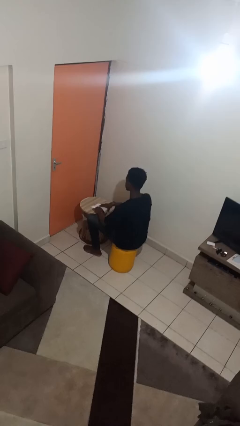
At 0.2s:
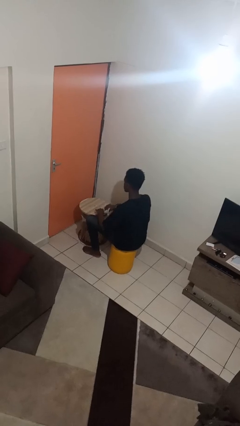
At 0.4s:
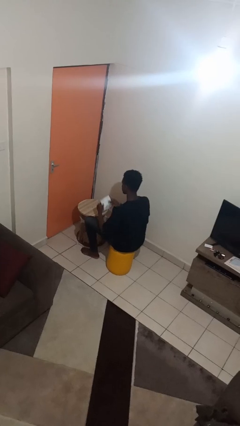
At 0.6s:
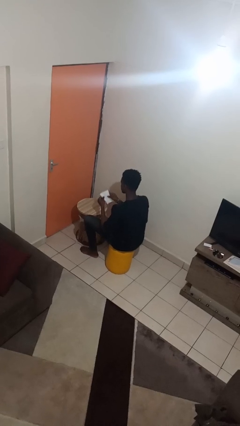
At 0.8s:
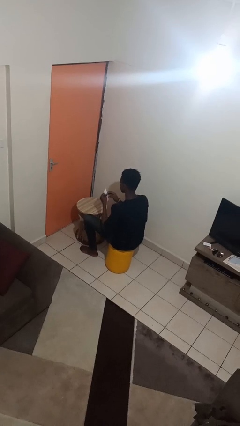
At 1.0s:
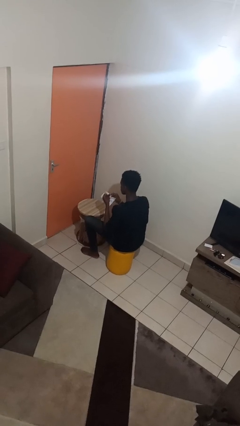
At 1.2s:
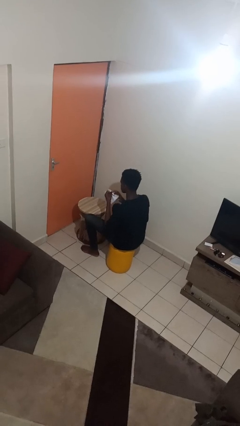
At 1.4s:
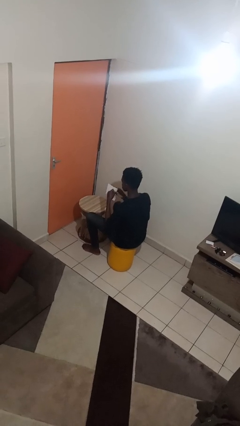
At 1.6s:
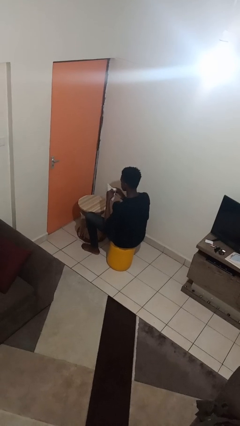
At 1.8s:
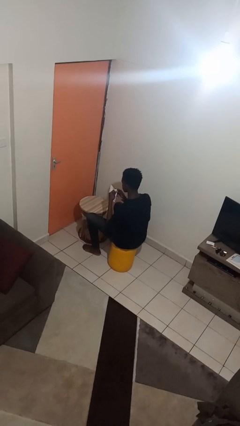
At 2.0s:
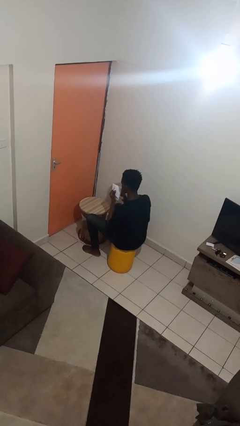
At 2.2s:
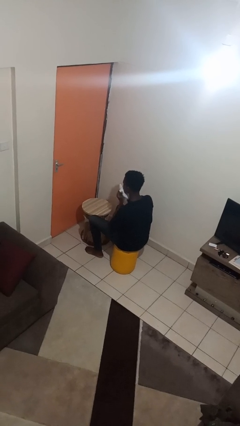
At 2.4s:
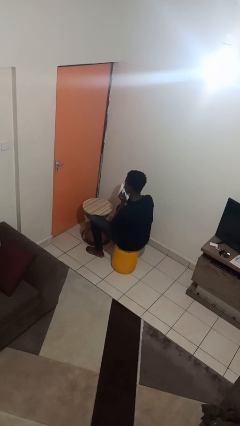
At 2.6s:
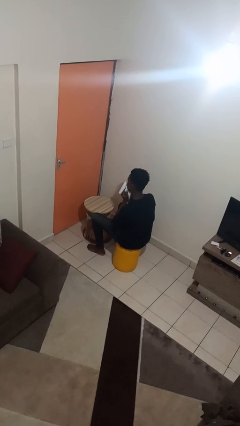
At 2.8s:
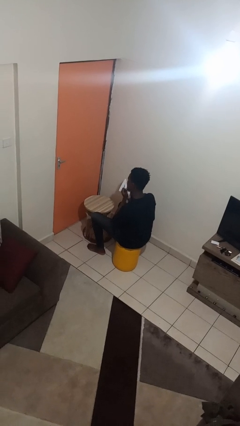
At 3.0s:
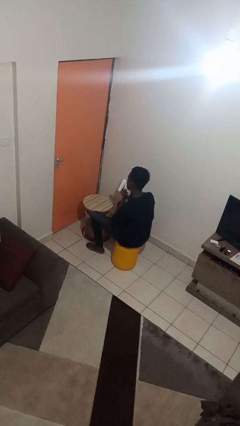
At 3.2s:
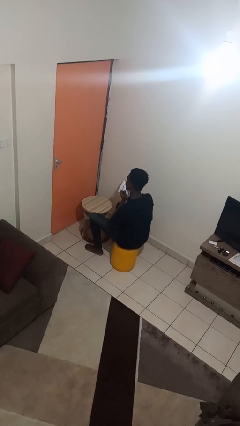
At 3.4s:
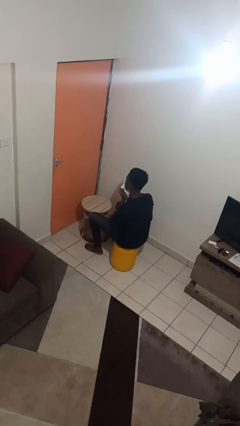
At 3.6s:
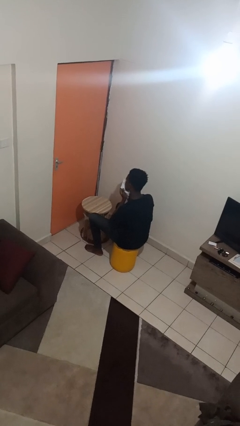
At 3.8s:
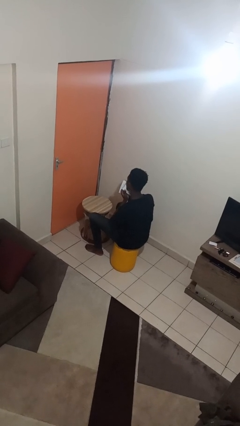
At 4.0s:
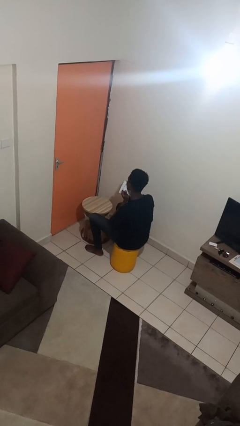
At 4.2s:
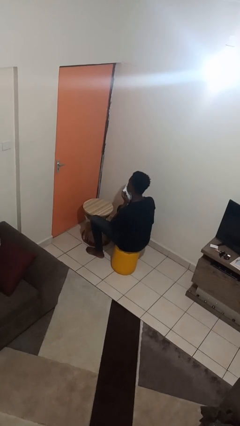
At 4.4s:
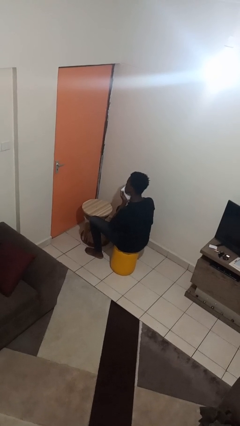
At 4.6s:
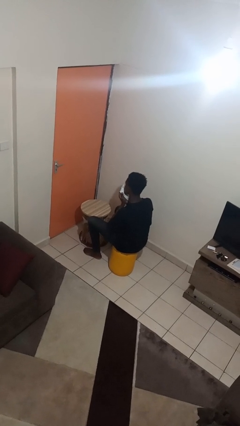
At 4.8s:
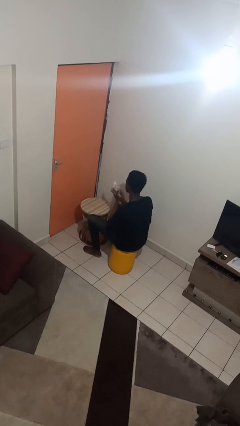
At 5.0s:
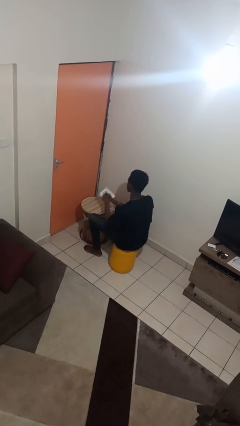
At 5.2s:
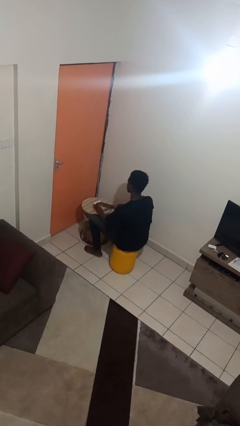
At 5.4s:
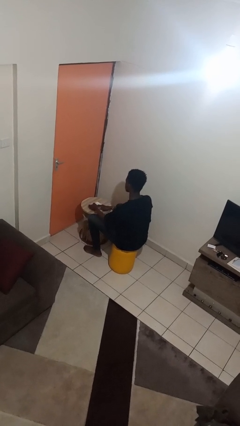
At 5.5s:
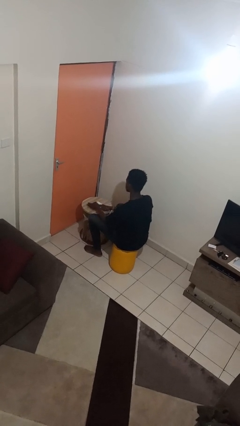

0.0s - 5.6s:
person wipes mouth with napkin

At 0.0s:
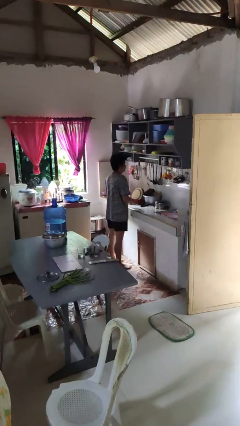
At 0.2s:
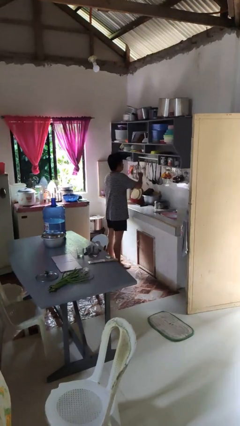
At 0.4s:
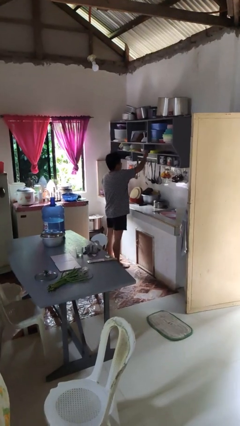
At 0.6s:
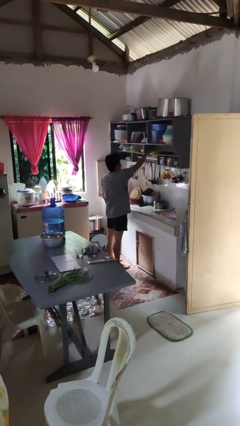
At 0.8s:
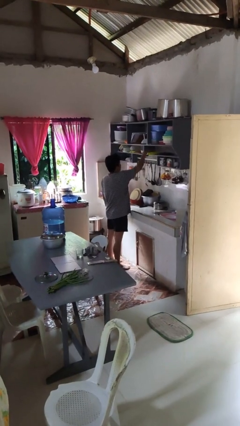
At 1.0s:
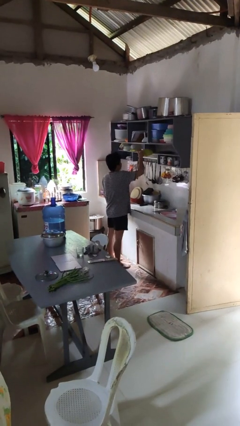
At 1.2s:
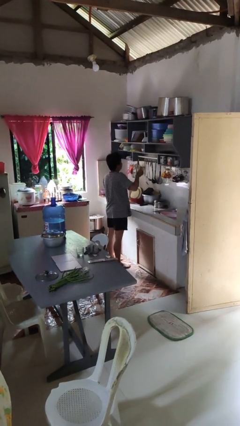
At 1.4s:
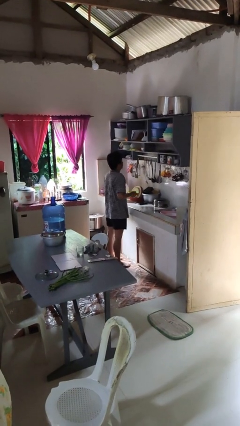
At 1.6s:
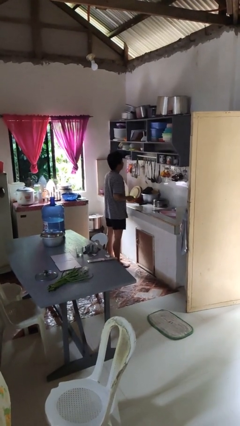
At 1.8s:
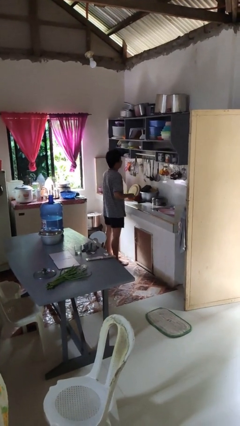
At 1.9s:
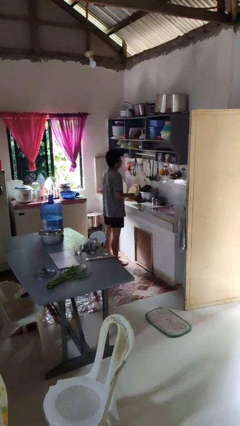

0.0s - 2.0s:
person takes object from cabinet

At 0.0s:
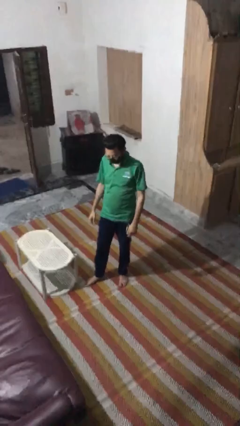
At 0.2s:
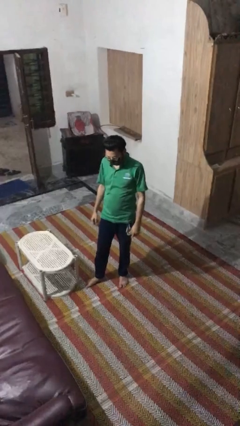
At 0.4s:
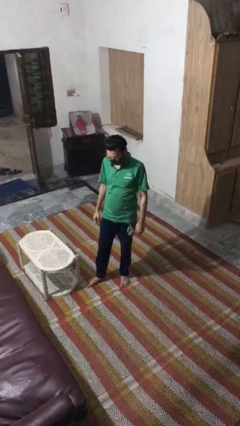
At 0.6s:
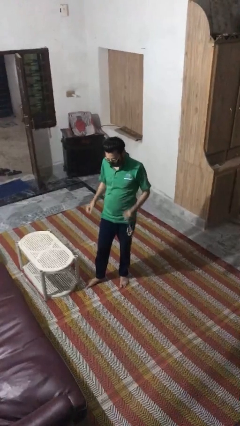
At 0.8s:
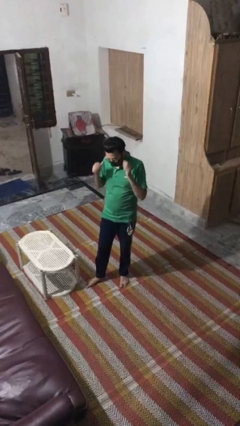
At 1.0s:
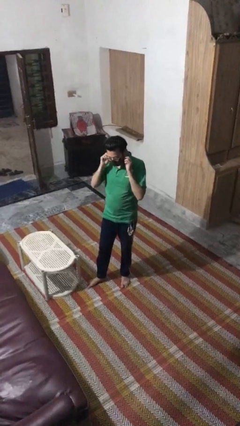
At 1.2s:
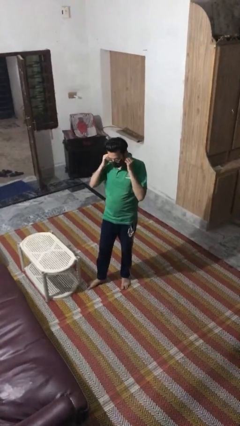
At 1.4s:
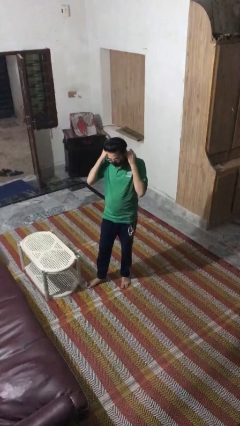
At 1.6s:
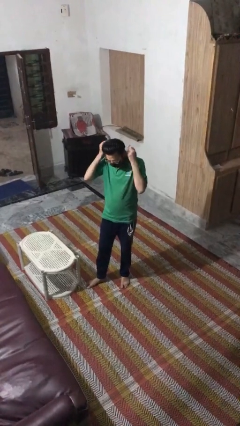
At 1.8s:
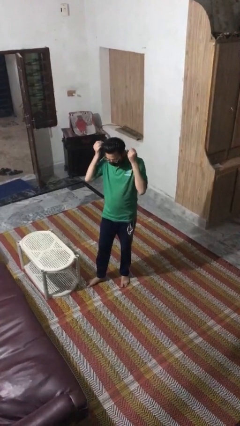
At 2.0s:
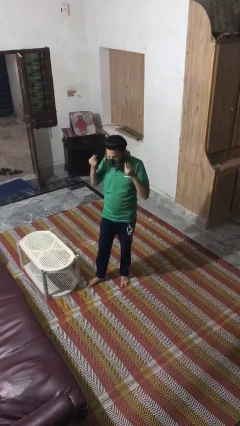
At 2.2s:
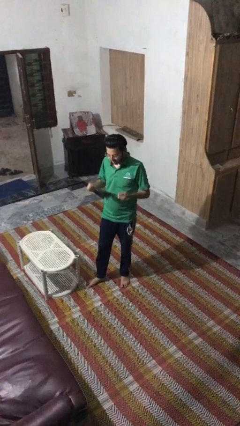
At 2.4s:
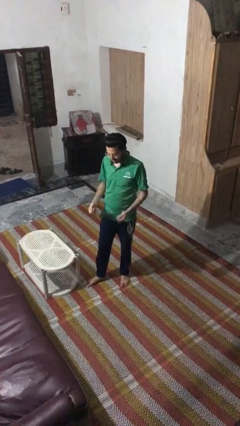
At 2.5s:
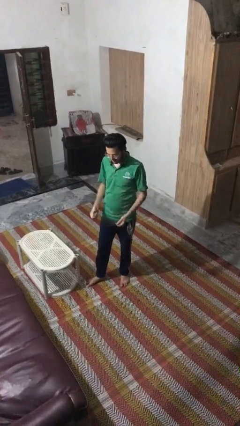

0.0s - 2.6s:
person takes off facemask

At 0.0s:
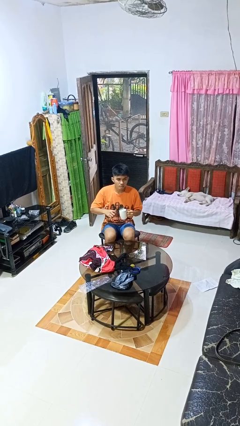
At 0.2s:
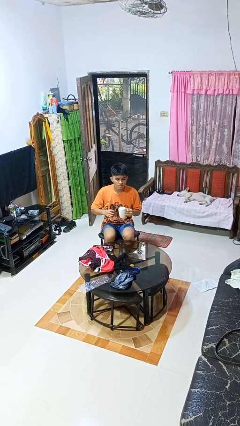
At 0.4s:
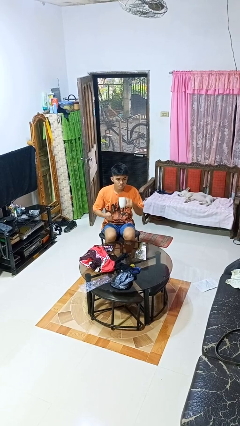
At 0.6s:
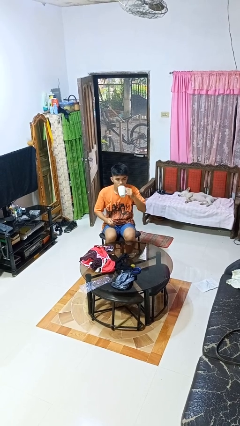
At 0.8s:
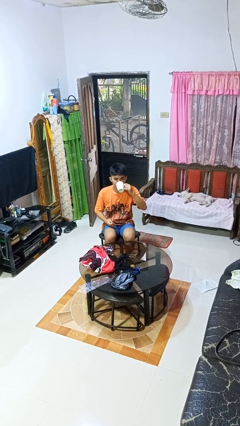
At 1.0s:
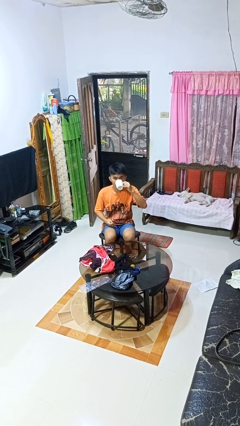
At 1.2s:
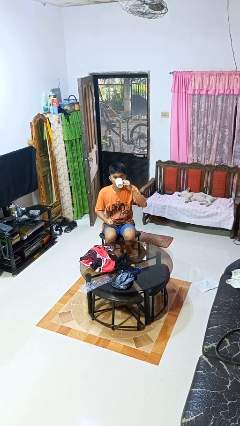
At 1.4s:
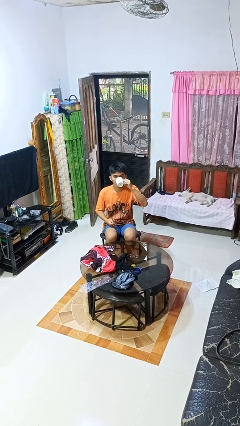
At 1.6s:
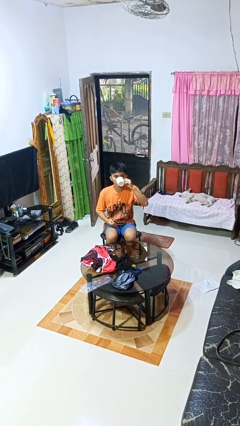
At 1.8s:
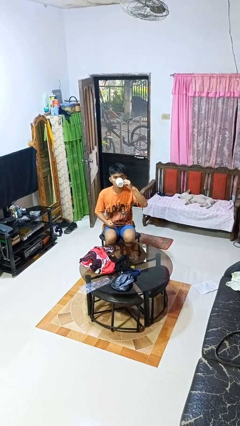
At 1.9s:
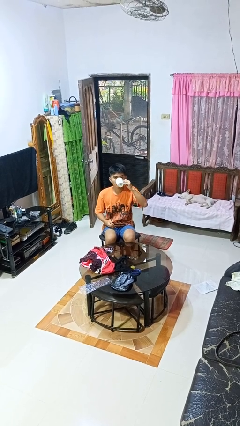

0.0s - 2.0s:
person drinks from mug

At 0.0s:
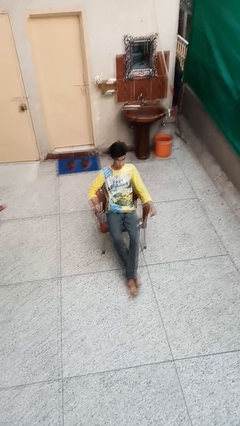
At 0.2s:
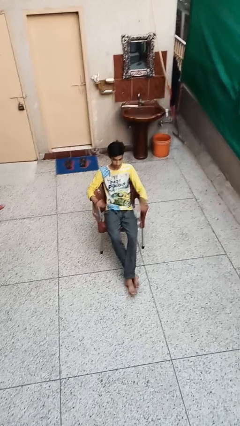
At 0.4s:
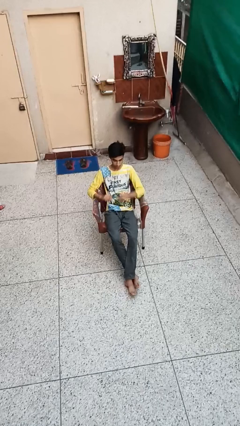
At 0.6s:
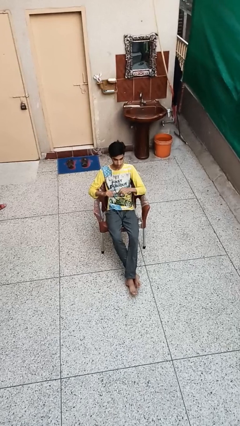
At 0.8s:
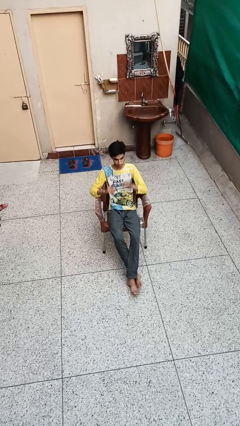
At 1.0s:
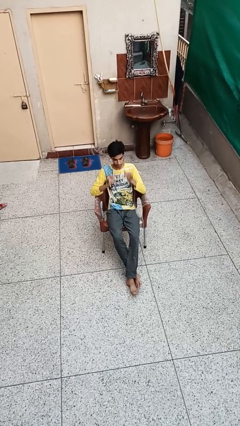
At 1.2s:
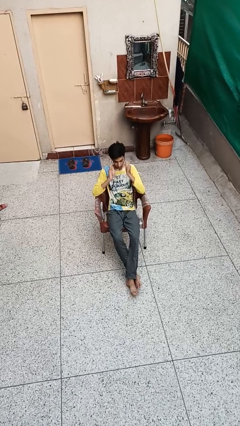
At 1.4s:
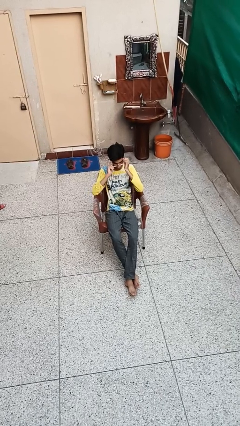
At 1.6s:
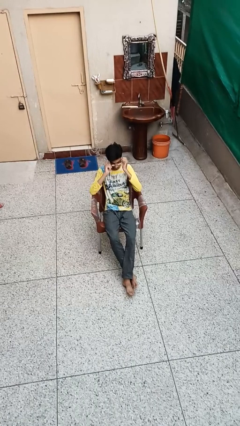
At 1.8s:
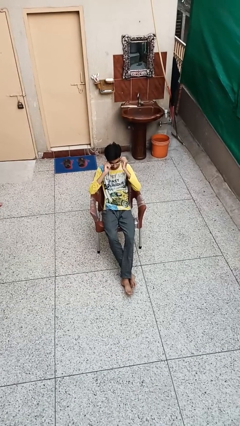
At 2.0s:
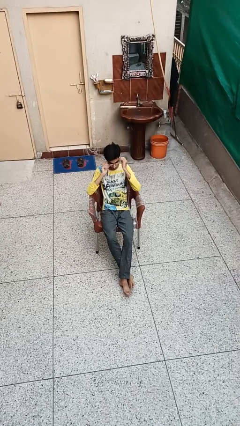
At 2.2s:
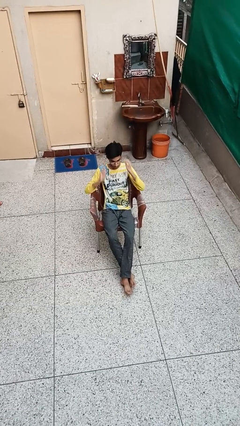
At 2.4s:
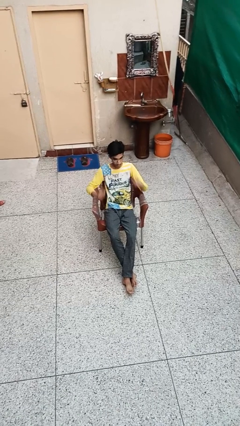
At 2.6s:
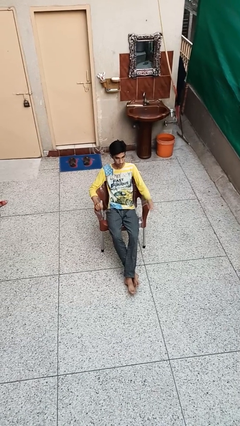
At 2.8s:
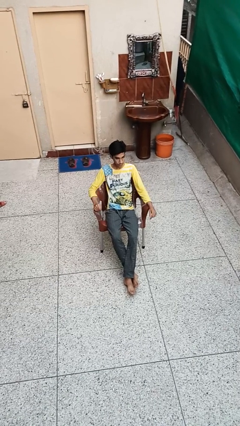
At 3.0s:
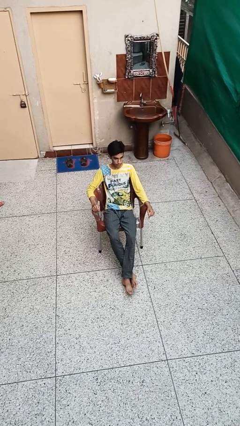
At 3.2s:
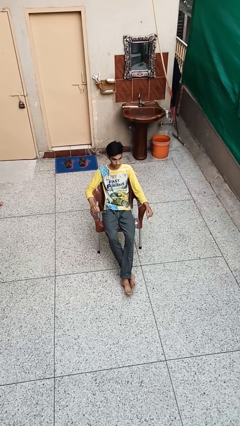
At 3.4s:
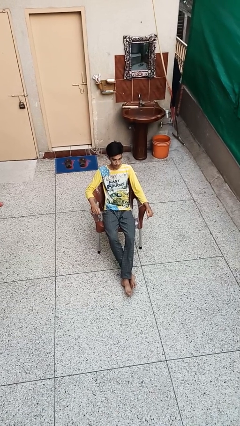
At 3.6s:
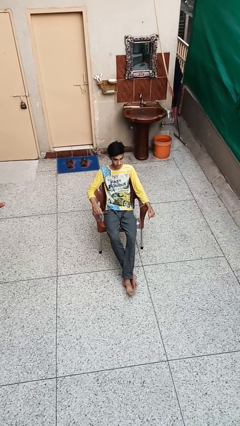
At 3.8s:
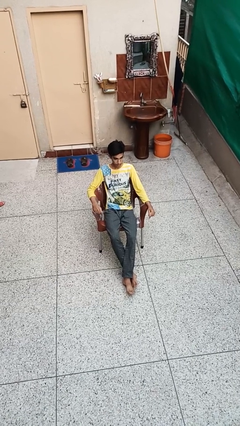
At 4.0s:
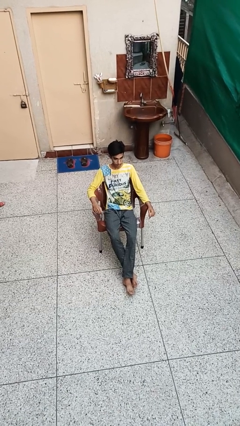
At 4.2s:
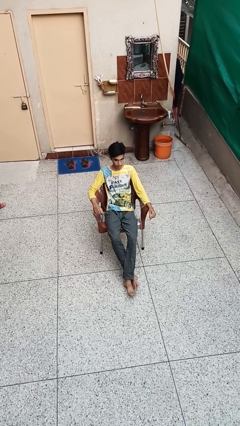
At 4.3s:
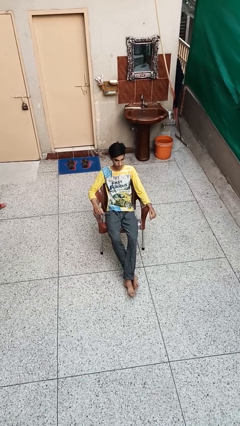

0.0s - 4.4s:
person puts on glasses

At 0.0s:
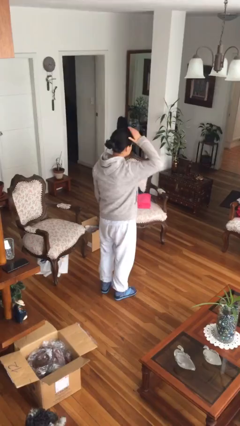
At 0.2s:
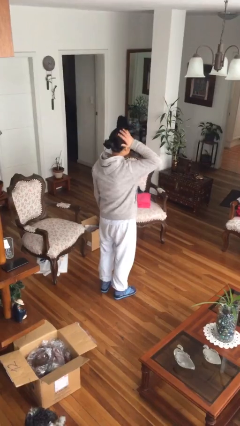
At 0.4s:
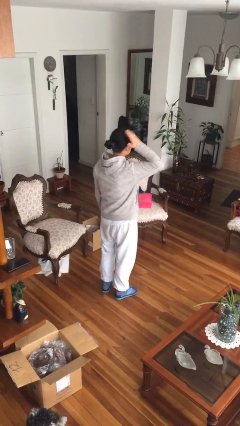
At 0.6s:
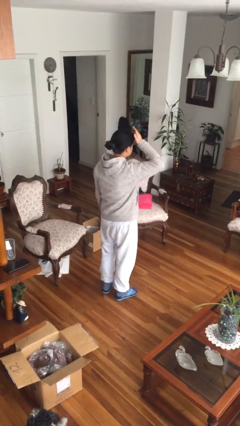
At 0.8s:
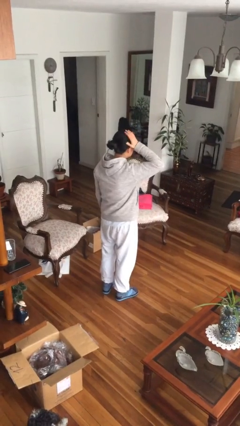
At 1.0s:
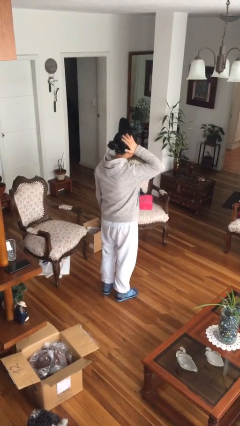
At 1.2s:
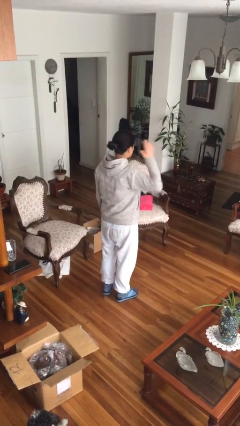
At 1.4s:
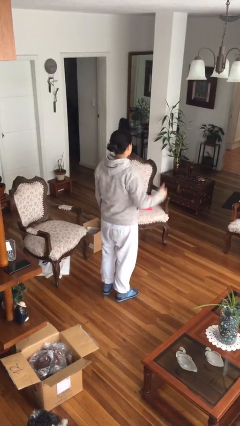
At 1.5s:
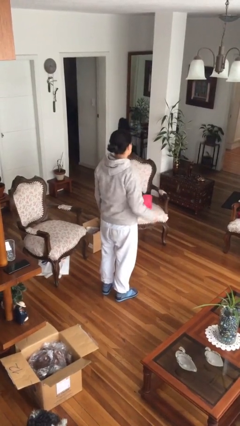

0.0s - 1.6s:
person pats head
